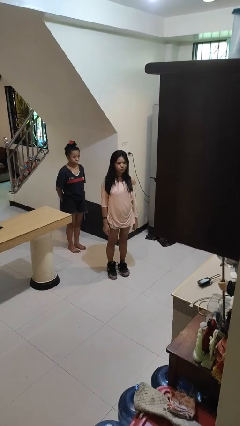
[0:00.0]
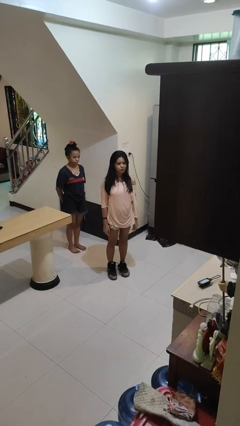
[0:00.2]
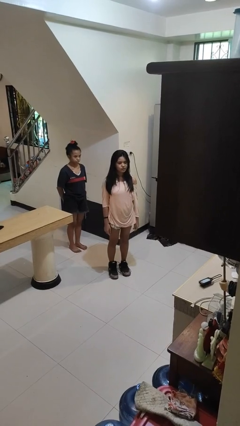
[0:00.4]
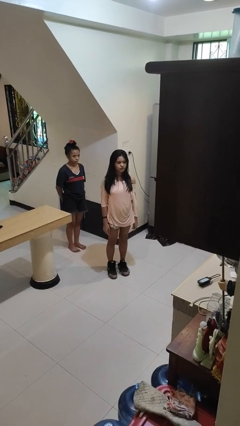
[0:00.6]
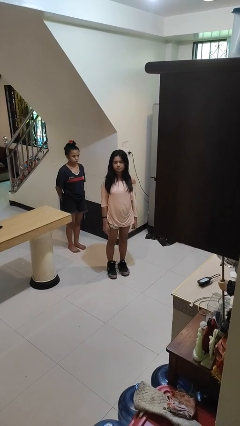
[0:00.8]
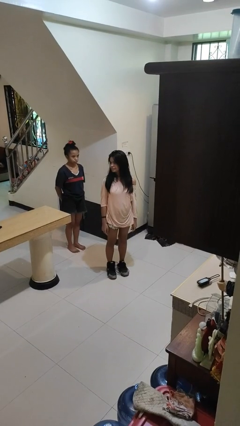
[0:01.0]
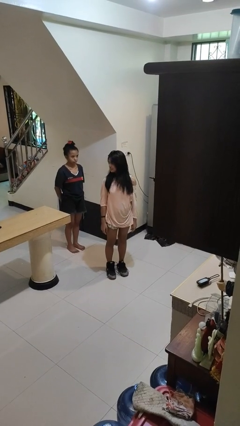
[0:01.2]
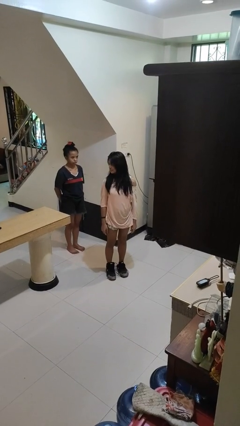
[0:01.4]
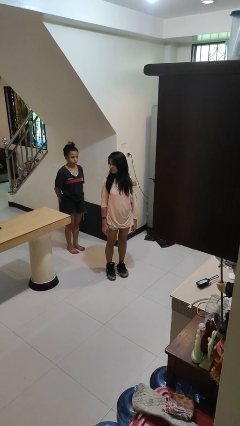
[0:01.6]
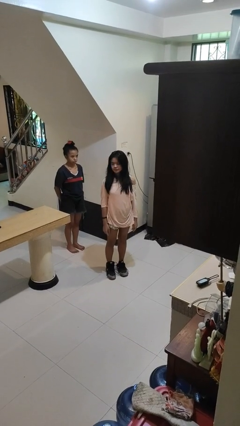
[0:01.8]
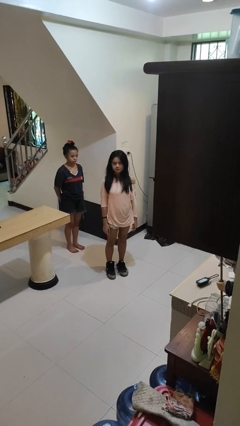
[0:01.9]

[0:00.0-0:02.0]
person looks over shoulder

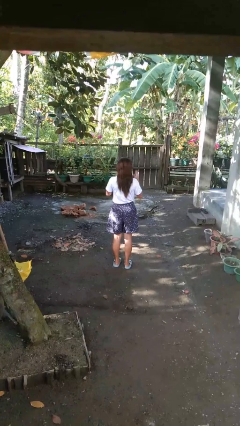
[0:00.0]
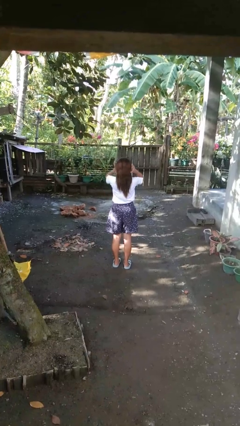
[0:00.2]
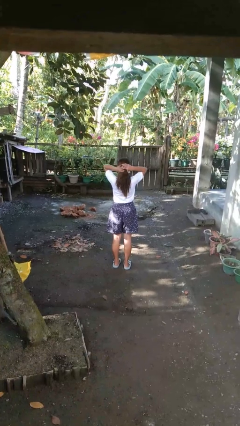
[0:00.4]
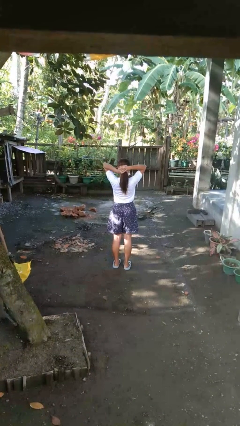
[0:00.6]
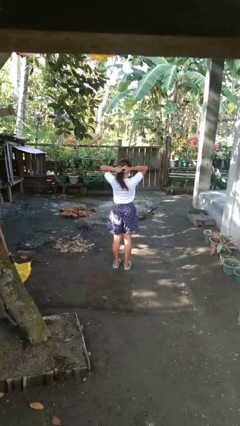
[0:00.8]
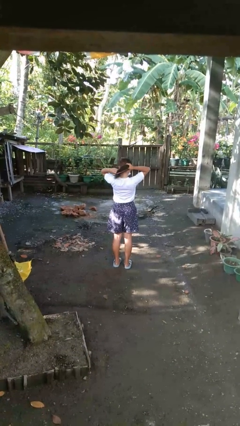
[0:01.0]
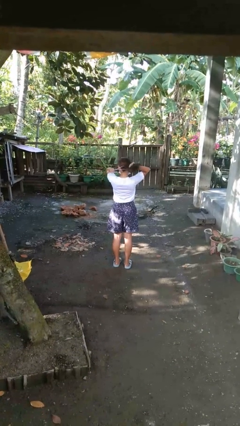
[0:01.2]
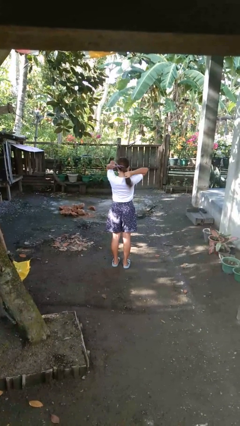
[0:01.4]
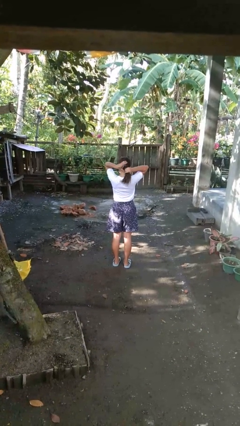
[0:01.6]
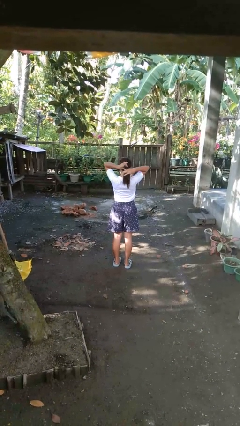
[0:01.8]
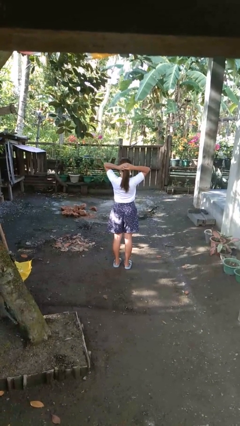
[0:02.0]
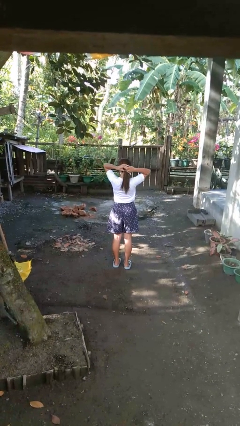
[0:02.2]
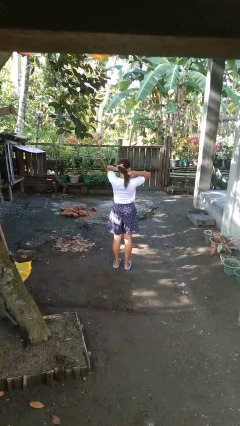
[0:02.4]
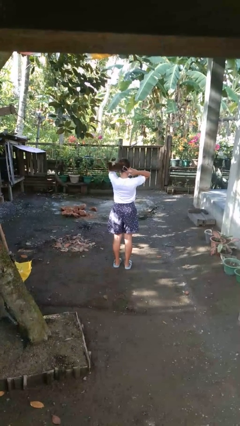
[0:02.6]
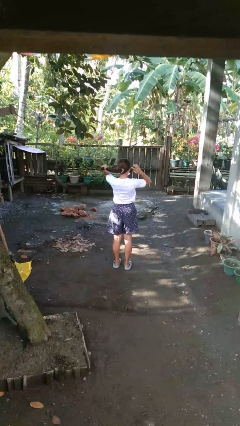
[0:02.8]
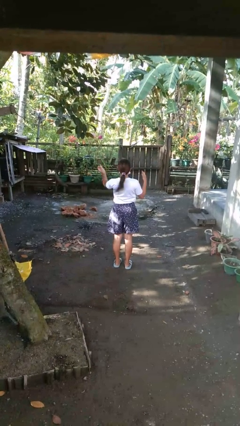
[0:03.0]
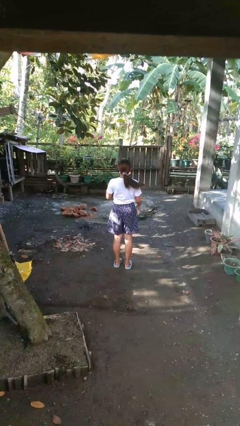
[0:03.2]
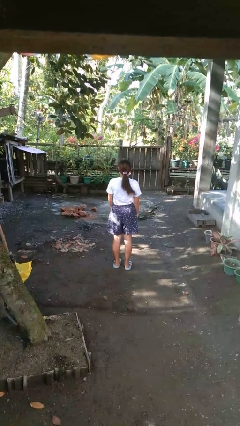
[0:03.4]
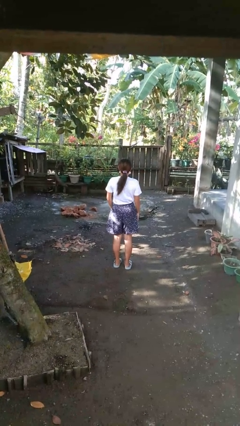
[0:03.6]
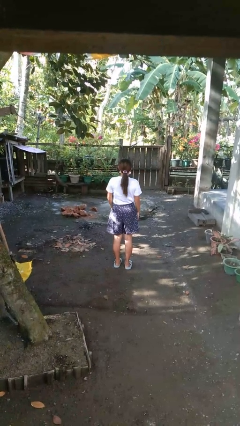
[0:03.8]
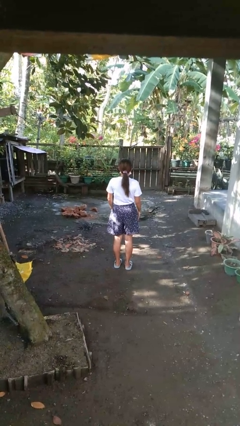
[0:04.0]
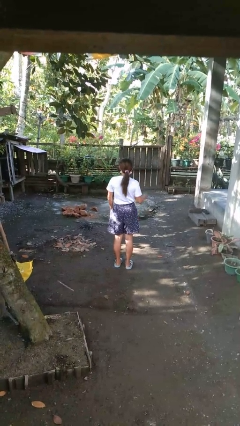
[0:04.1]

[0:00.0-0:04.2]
person puts hair in ponytail

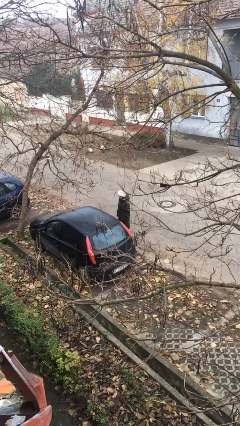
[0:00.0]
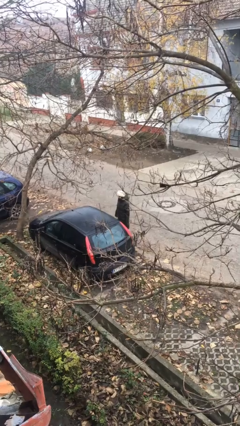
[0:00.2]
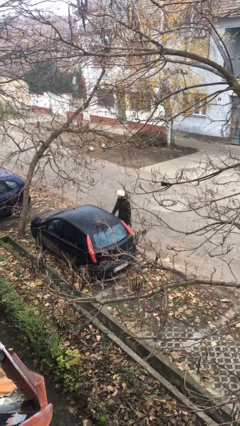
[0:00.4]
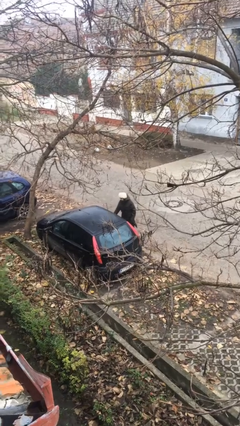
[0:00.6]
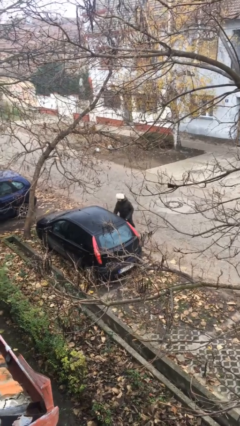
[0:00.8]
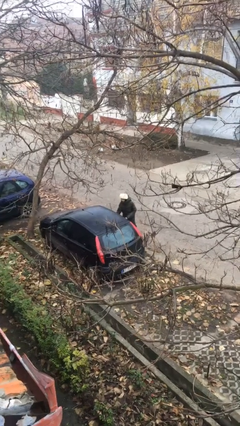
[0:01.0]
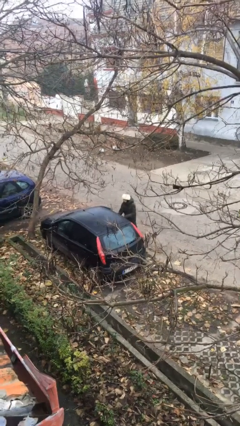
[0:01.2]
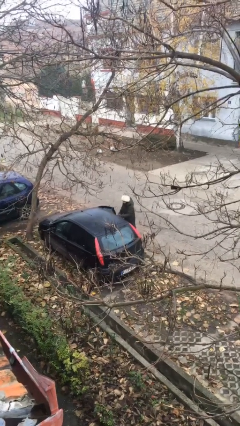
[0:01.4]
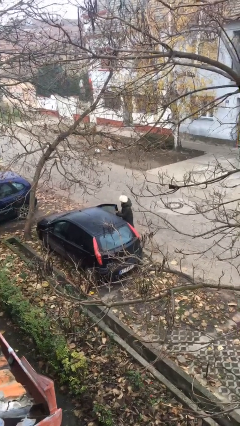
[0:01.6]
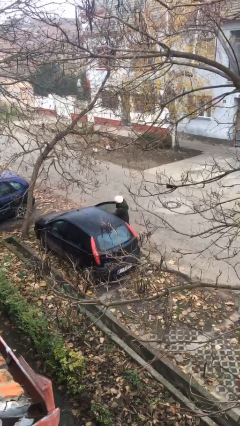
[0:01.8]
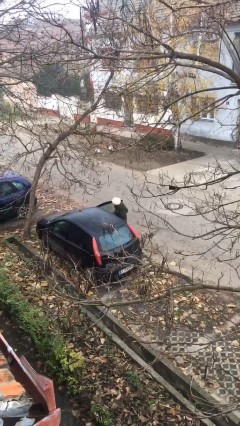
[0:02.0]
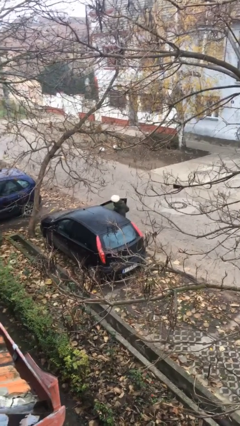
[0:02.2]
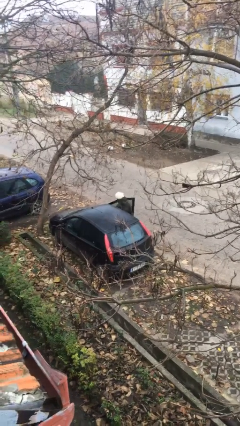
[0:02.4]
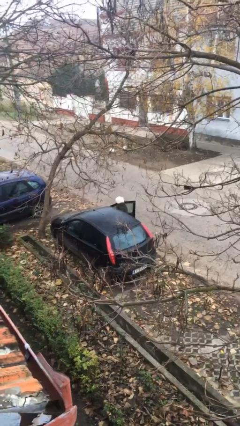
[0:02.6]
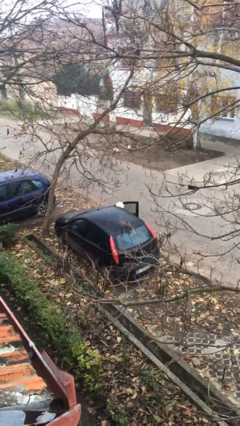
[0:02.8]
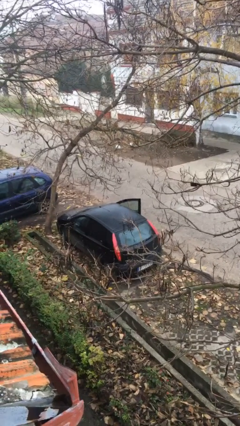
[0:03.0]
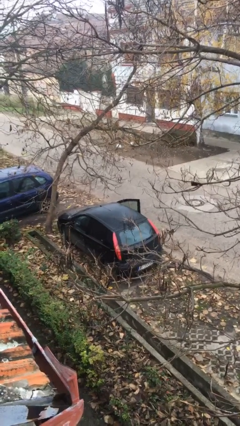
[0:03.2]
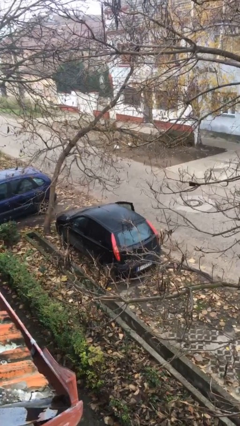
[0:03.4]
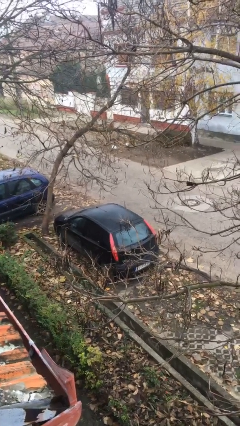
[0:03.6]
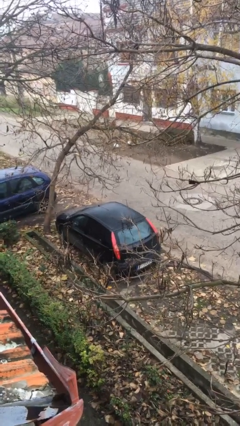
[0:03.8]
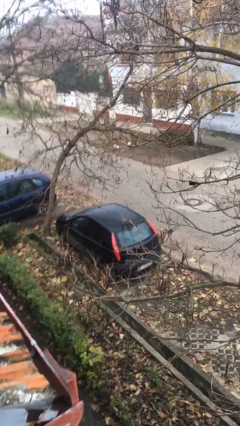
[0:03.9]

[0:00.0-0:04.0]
person enters car

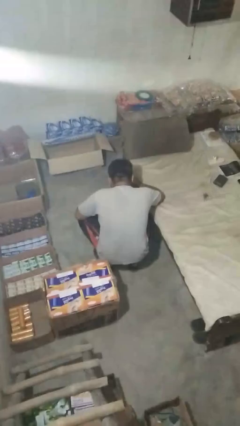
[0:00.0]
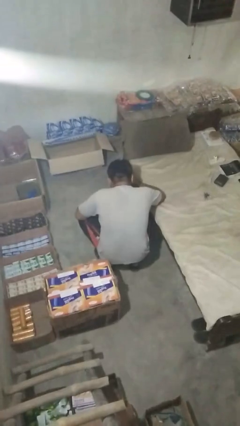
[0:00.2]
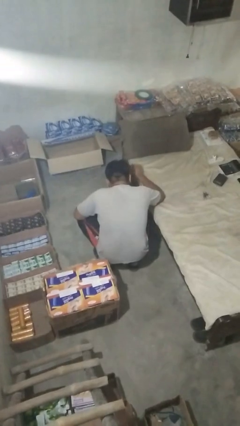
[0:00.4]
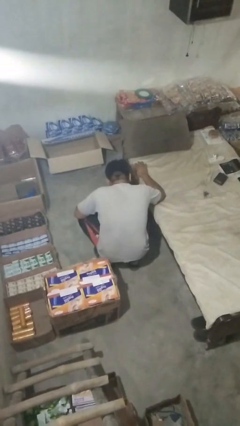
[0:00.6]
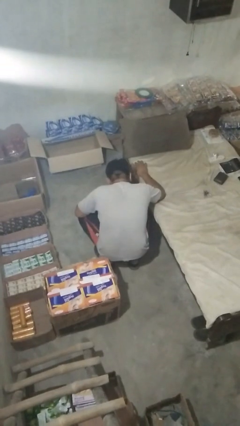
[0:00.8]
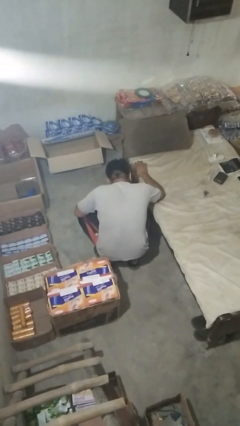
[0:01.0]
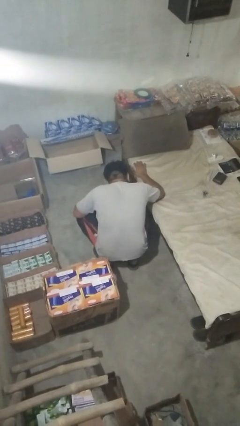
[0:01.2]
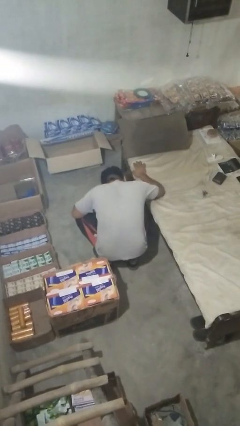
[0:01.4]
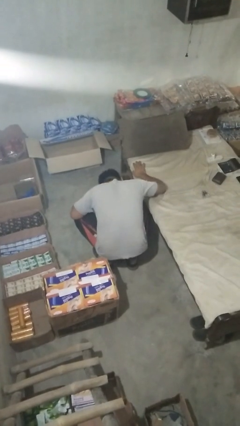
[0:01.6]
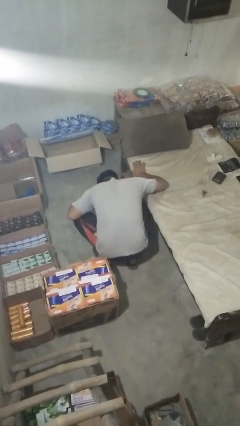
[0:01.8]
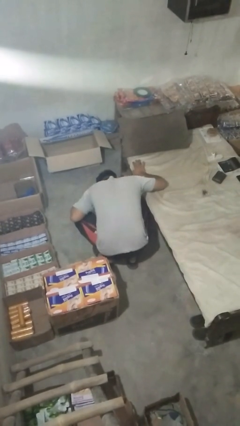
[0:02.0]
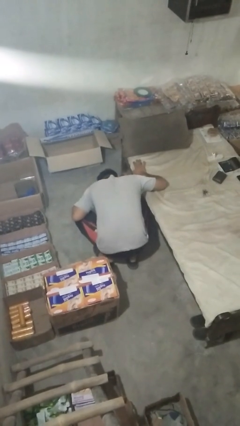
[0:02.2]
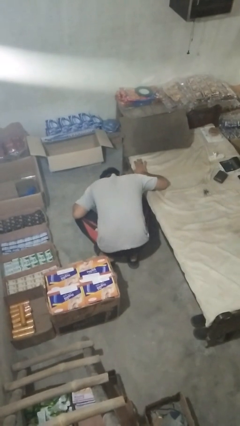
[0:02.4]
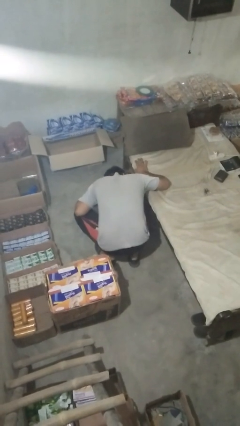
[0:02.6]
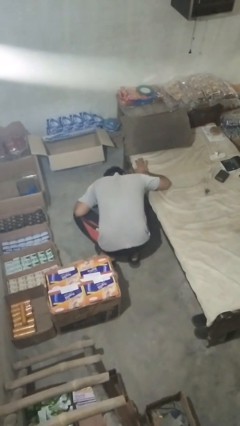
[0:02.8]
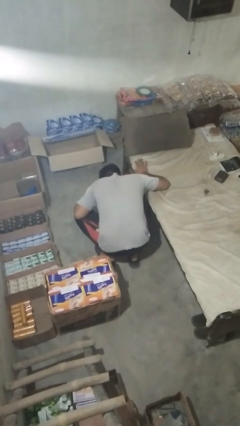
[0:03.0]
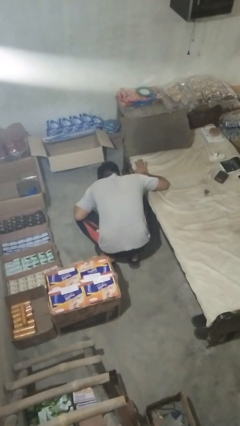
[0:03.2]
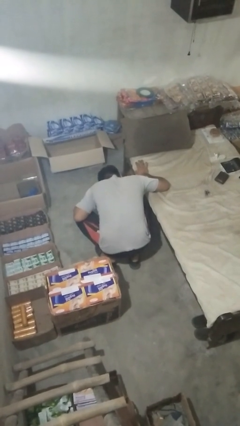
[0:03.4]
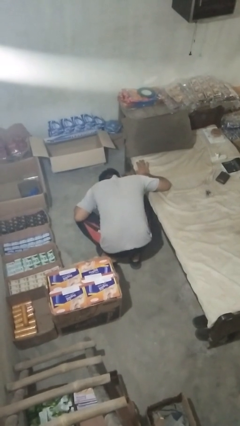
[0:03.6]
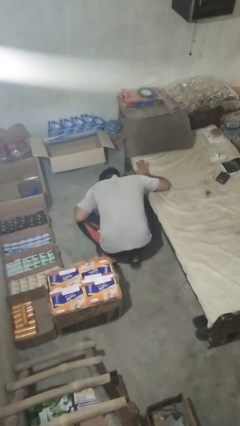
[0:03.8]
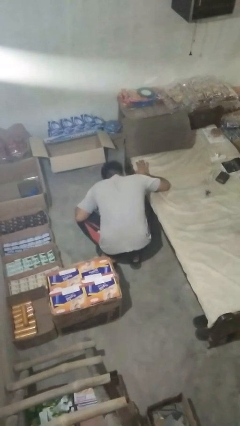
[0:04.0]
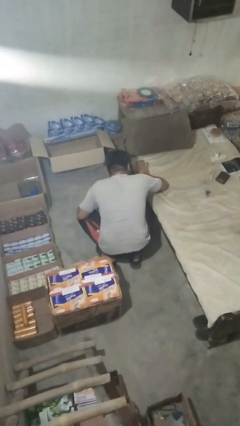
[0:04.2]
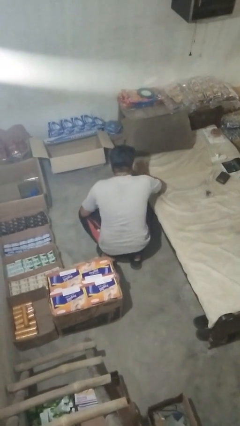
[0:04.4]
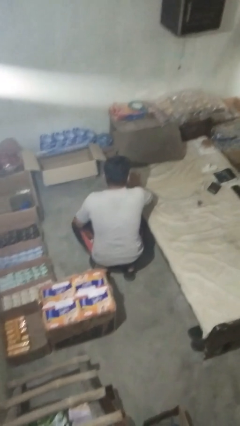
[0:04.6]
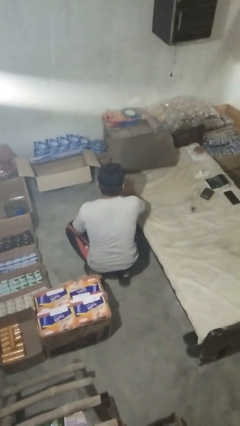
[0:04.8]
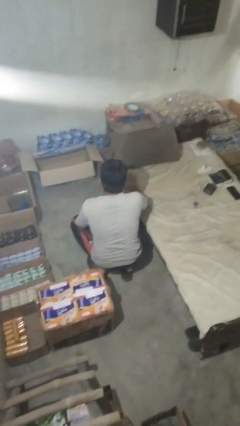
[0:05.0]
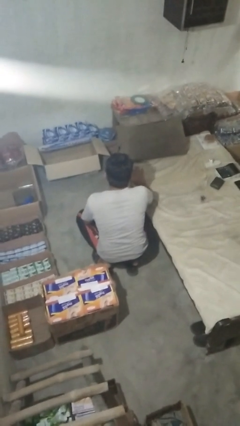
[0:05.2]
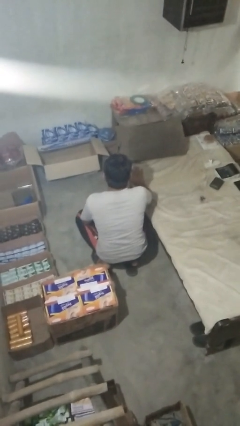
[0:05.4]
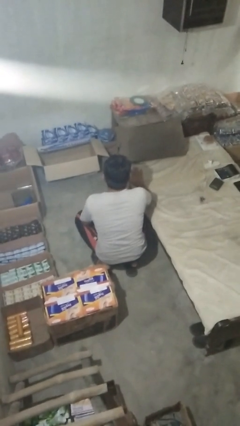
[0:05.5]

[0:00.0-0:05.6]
person searches under bed

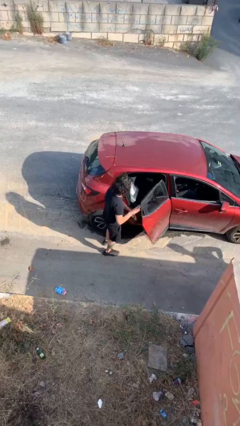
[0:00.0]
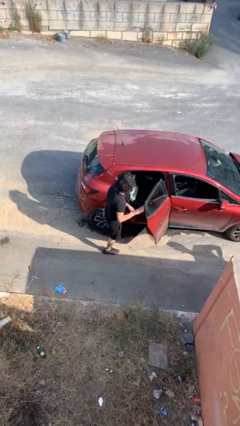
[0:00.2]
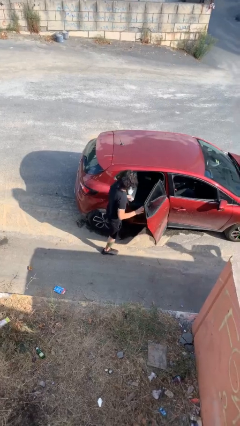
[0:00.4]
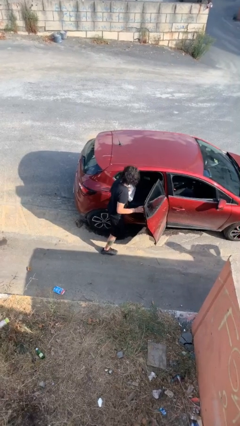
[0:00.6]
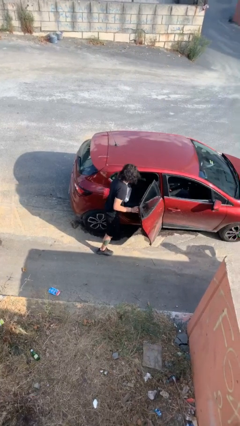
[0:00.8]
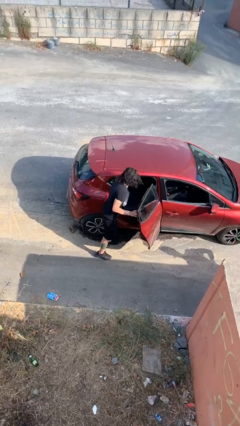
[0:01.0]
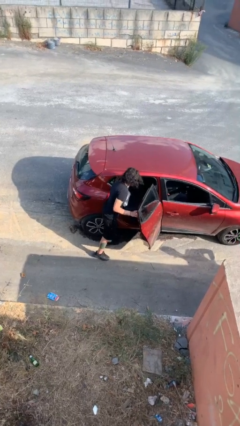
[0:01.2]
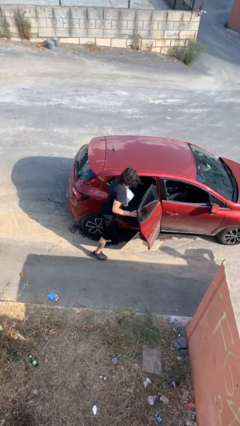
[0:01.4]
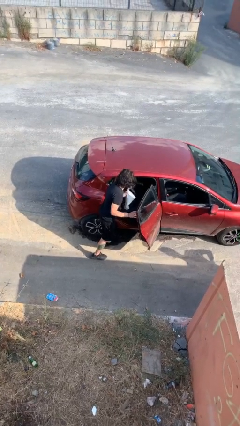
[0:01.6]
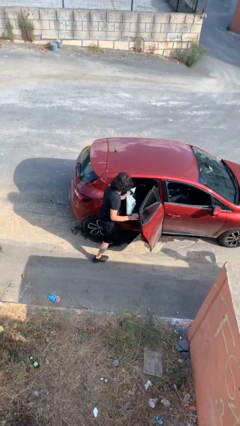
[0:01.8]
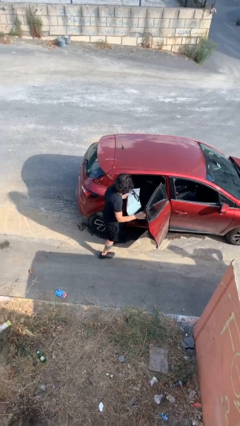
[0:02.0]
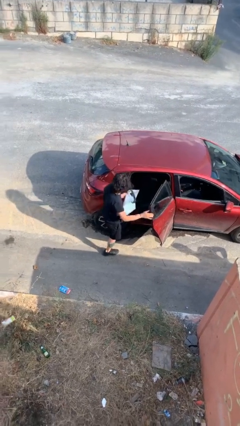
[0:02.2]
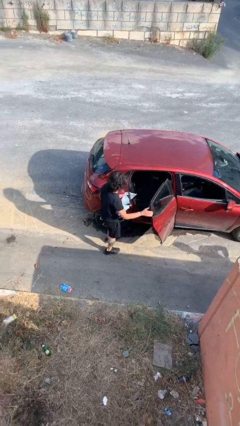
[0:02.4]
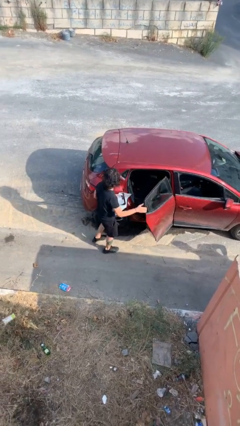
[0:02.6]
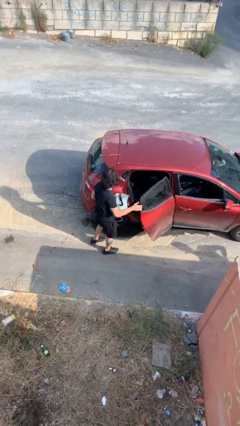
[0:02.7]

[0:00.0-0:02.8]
person unloads car
